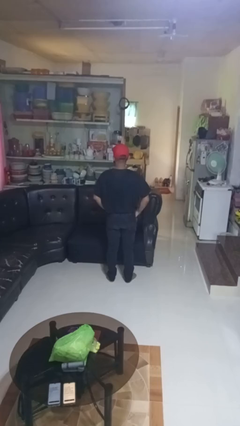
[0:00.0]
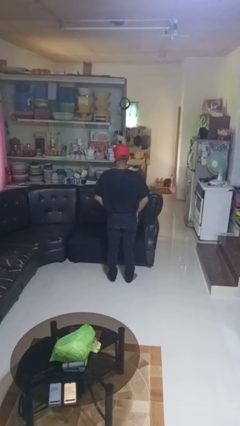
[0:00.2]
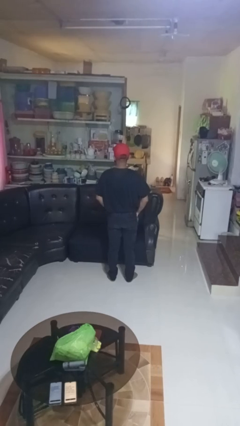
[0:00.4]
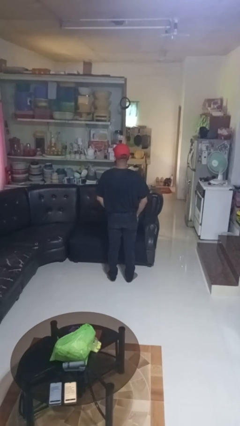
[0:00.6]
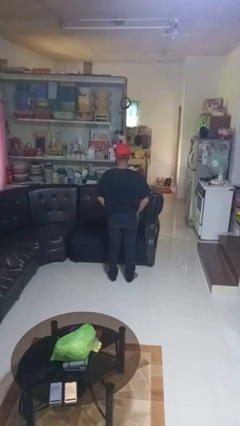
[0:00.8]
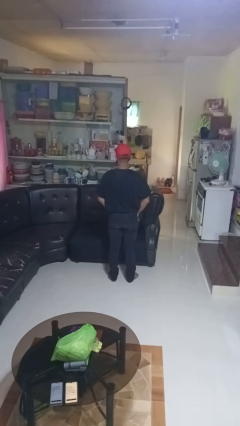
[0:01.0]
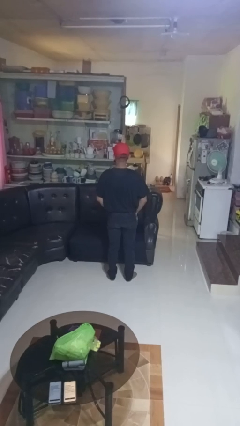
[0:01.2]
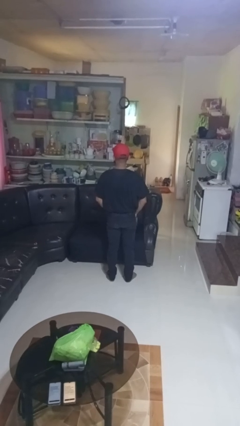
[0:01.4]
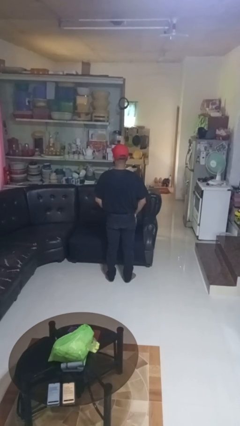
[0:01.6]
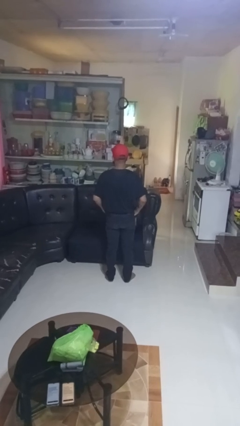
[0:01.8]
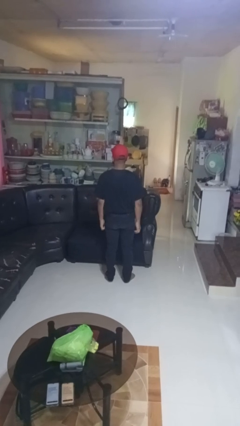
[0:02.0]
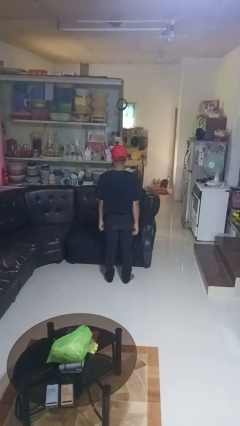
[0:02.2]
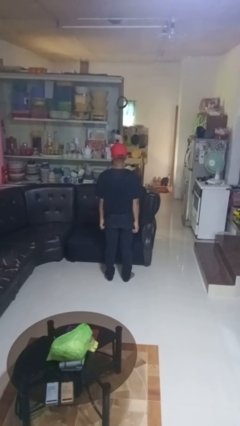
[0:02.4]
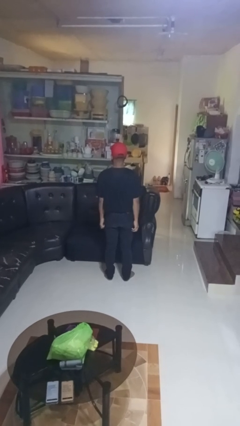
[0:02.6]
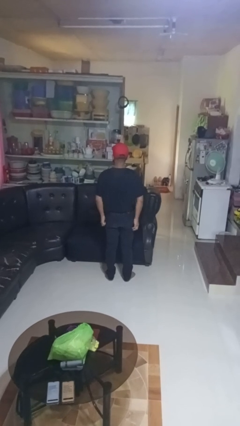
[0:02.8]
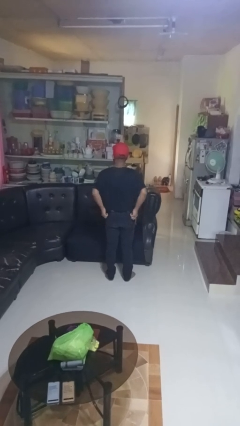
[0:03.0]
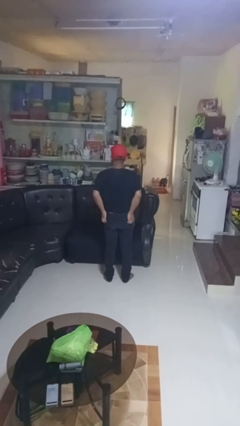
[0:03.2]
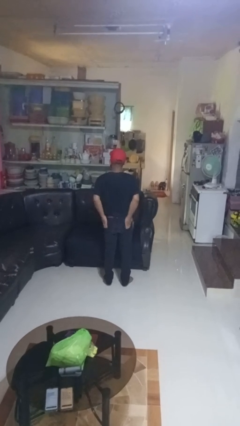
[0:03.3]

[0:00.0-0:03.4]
person puts hands in back pockets

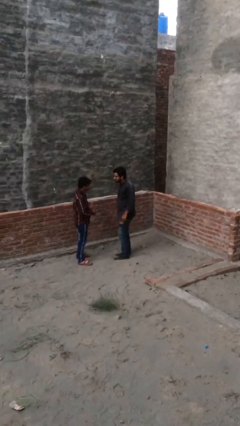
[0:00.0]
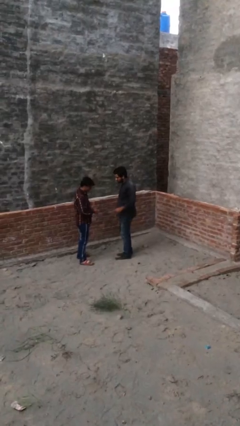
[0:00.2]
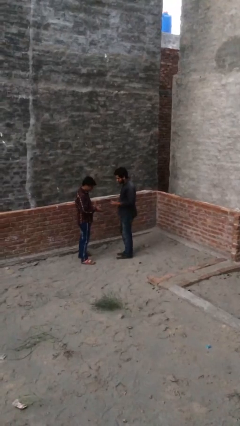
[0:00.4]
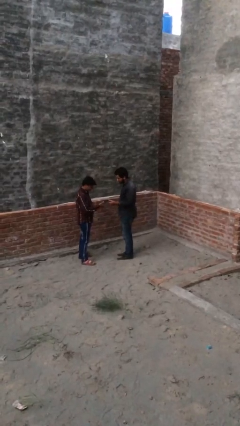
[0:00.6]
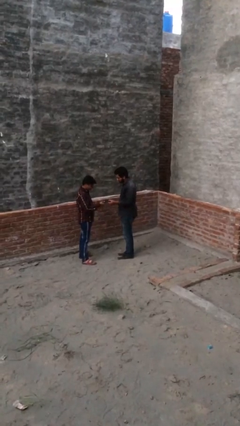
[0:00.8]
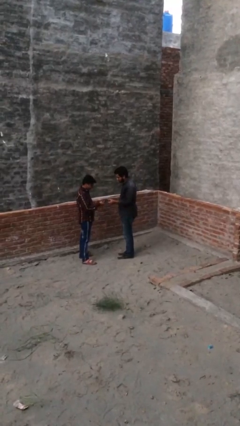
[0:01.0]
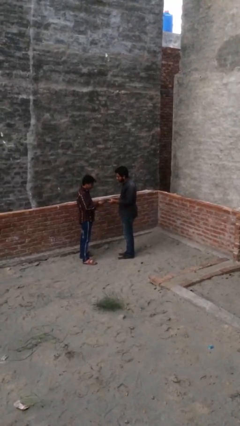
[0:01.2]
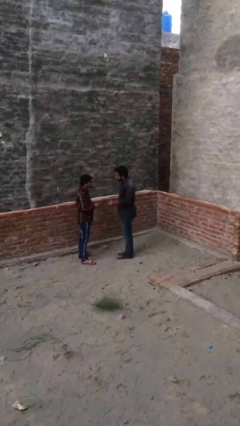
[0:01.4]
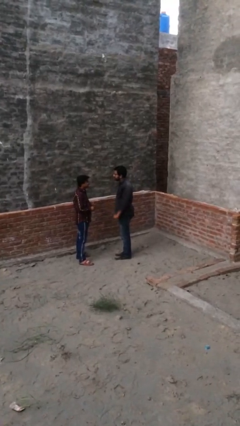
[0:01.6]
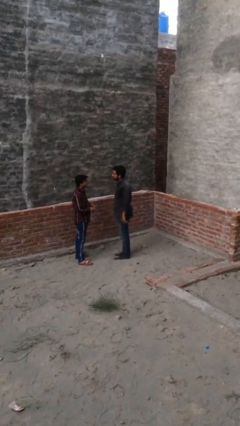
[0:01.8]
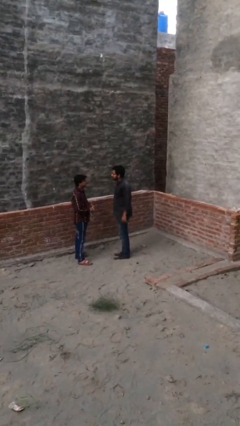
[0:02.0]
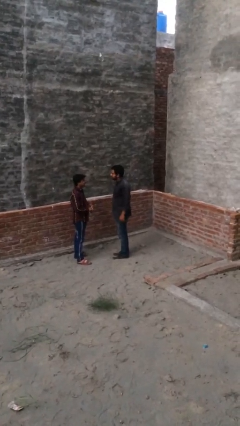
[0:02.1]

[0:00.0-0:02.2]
person transfers object to person

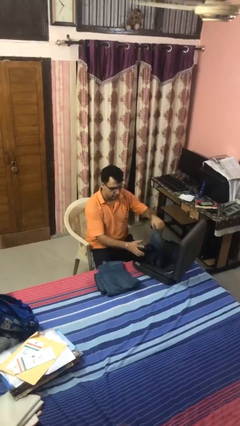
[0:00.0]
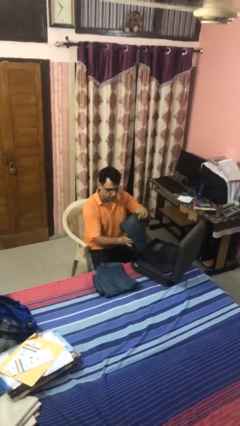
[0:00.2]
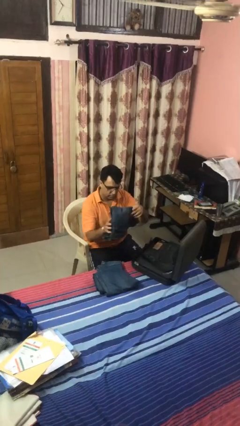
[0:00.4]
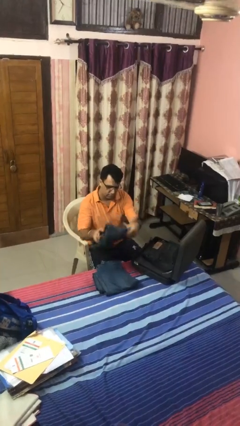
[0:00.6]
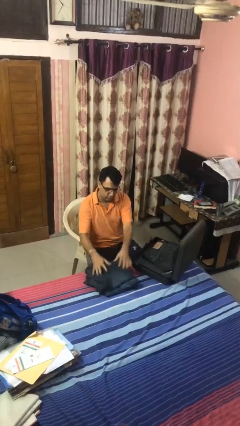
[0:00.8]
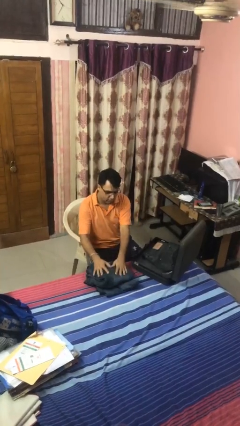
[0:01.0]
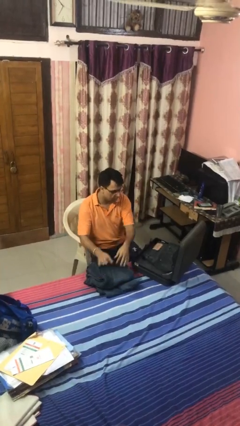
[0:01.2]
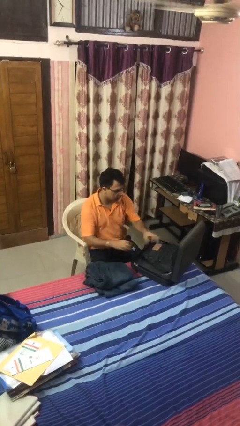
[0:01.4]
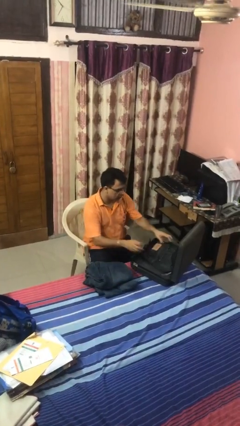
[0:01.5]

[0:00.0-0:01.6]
person unloads clothes from suitcase

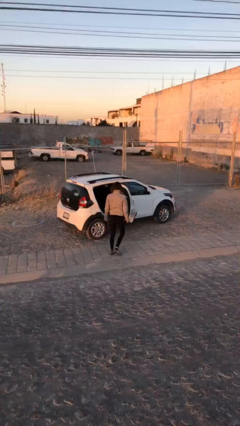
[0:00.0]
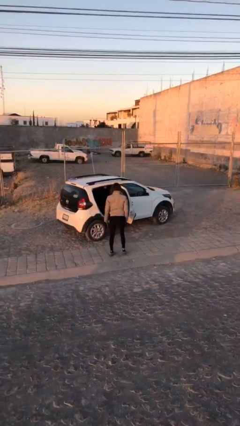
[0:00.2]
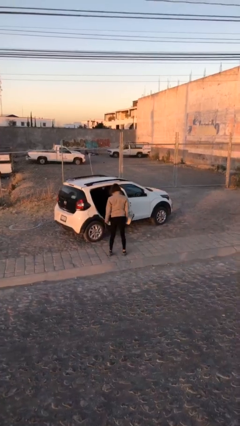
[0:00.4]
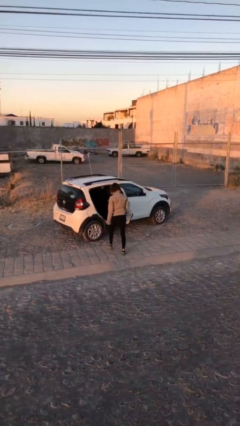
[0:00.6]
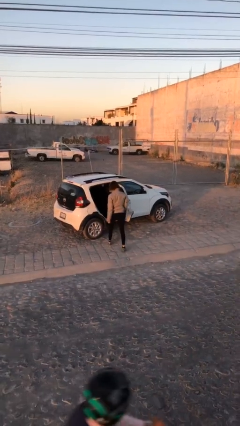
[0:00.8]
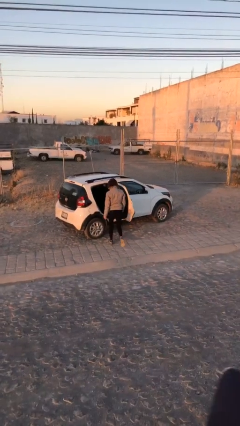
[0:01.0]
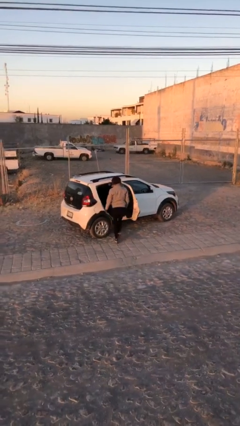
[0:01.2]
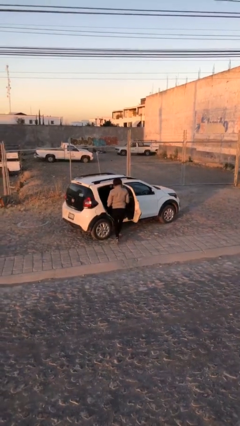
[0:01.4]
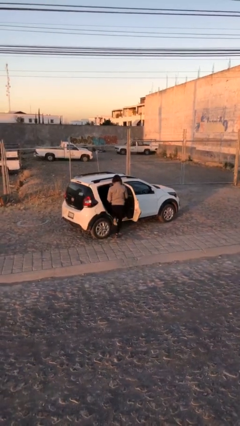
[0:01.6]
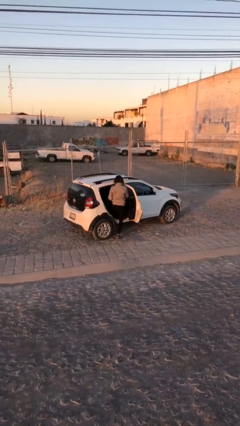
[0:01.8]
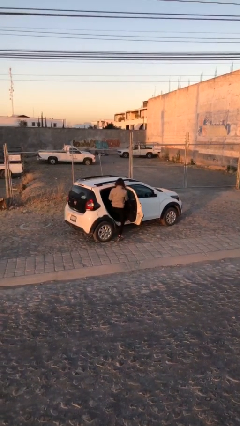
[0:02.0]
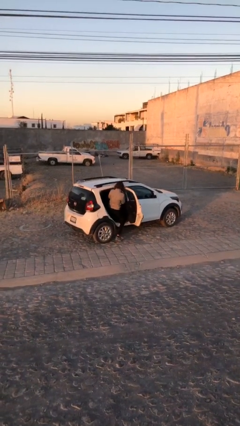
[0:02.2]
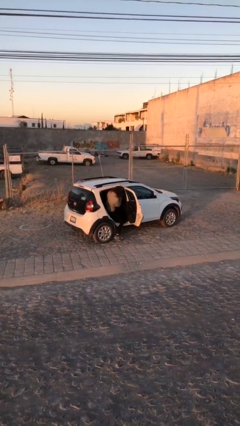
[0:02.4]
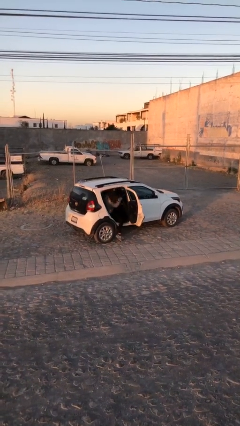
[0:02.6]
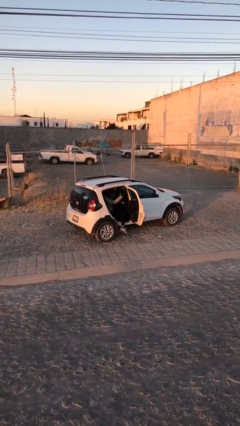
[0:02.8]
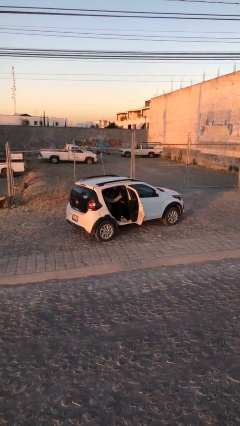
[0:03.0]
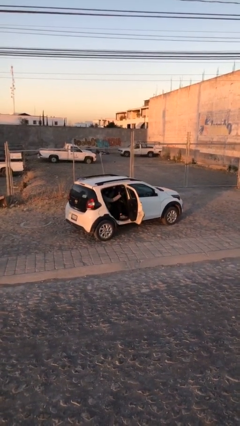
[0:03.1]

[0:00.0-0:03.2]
person enters car

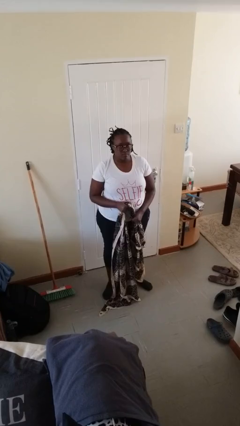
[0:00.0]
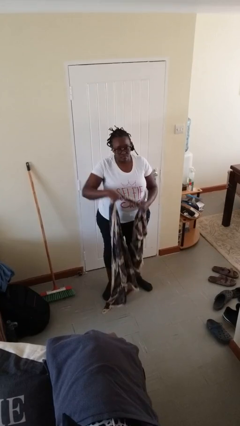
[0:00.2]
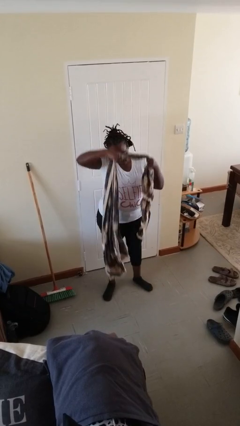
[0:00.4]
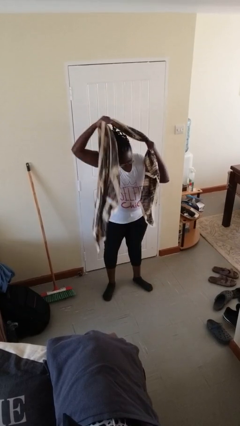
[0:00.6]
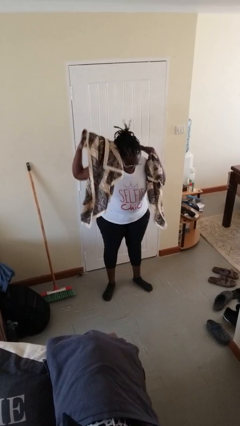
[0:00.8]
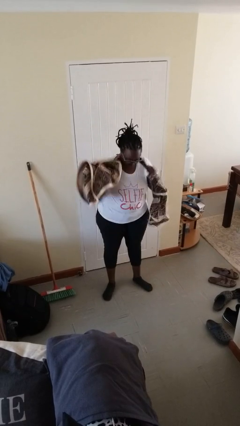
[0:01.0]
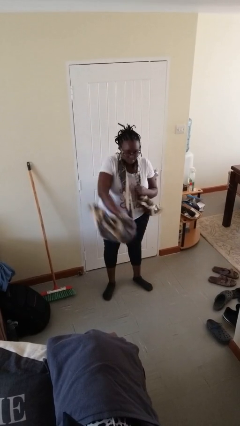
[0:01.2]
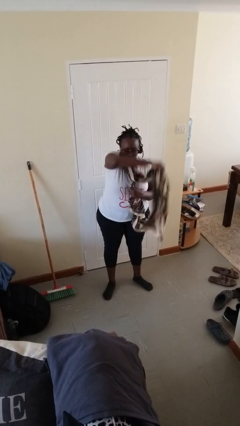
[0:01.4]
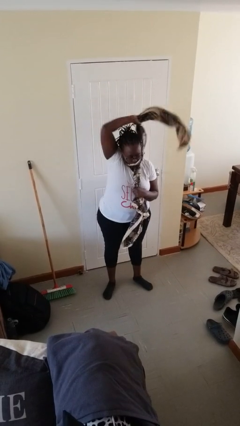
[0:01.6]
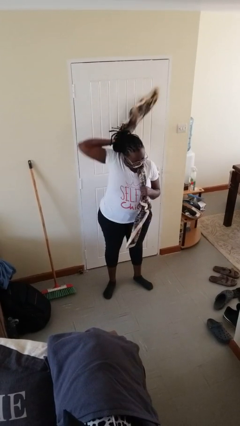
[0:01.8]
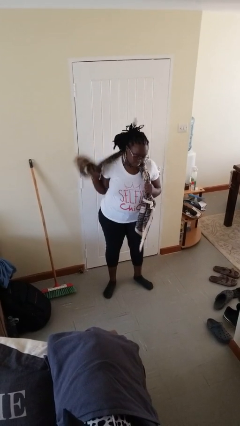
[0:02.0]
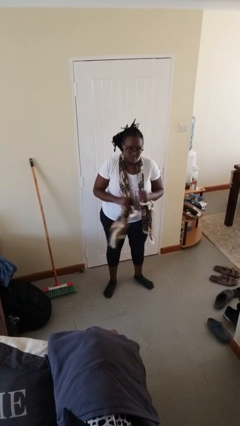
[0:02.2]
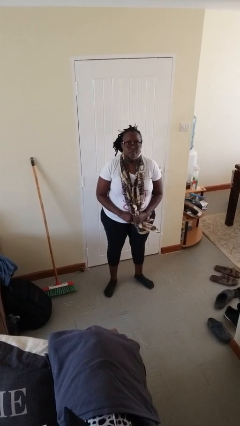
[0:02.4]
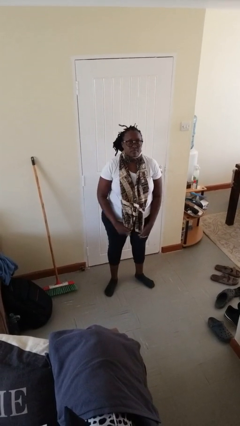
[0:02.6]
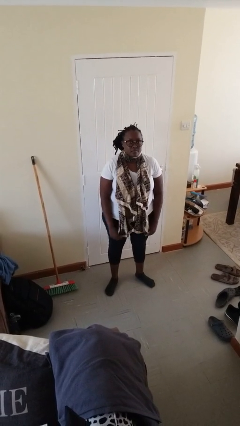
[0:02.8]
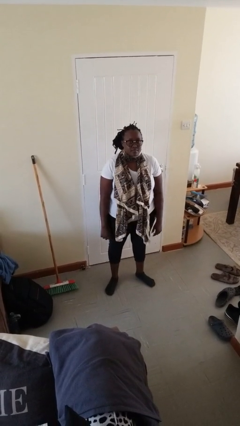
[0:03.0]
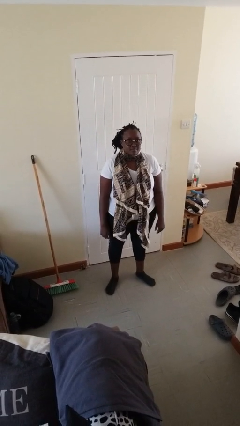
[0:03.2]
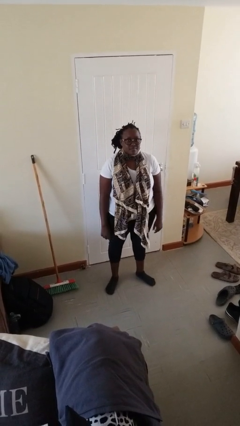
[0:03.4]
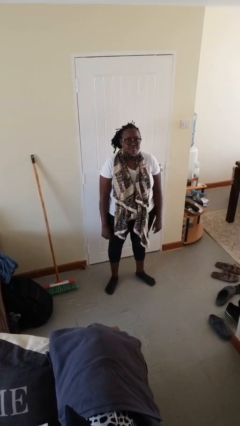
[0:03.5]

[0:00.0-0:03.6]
person puts on scarf

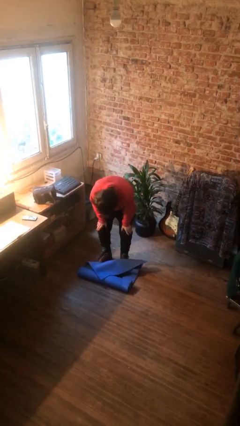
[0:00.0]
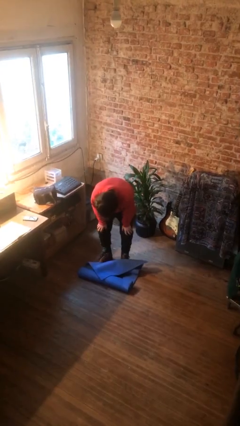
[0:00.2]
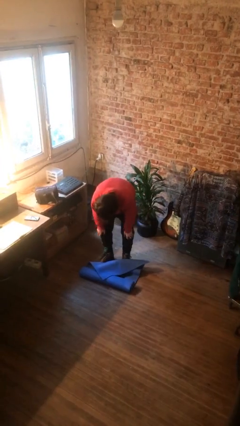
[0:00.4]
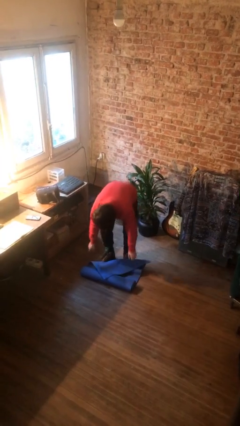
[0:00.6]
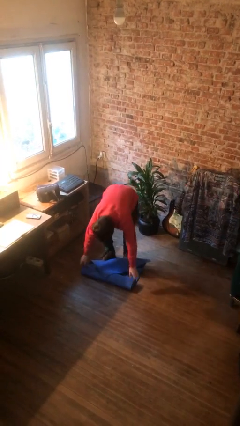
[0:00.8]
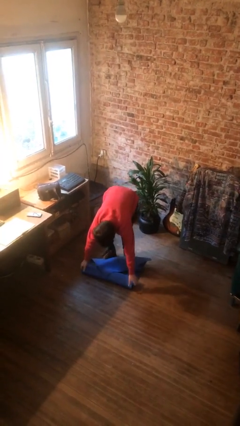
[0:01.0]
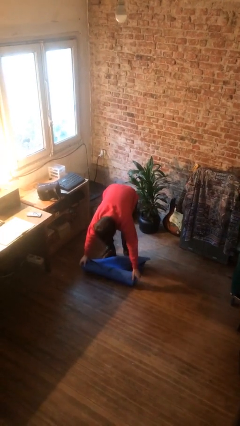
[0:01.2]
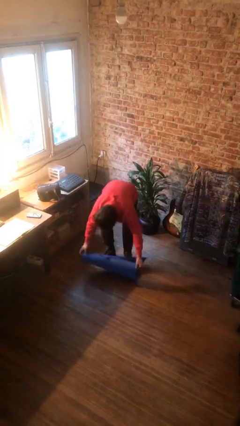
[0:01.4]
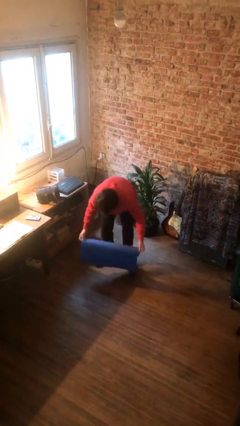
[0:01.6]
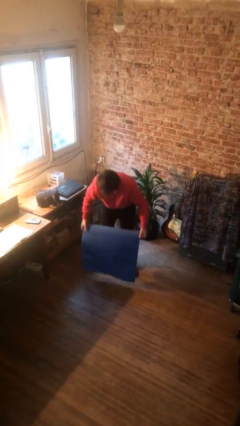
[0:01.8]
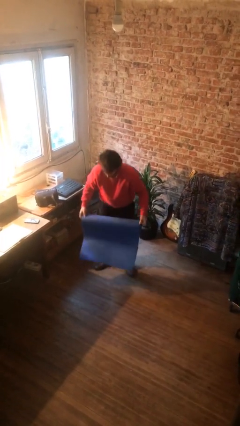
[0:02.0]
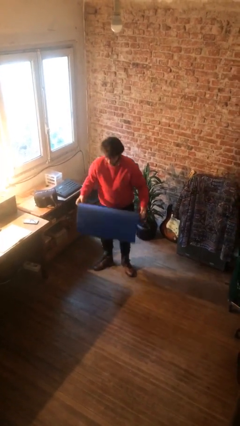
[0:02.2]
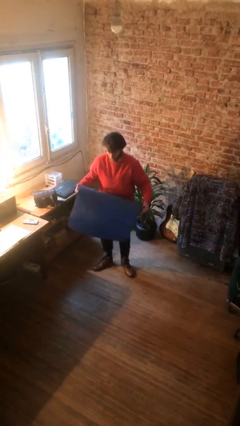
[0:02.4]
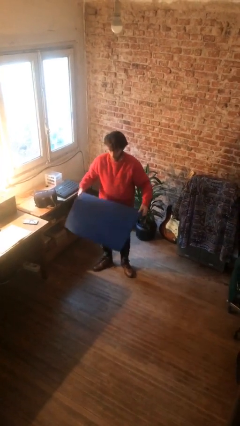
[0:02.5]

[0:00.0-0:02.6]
person picks up object from floor

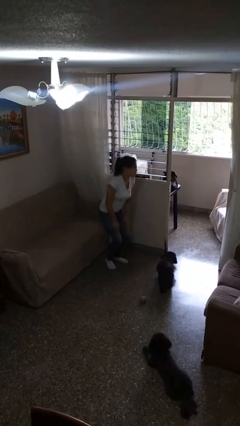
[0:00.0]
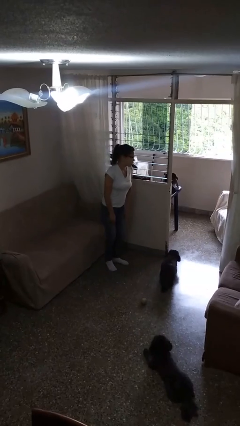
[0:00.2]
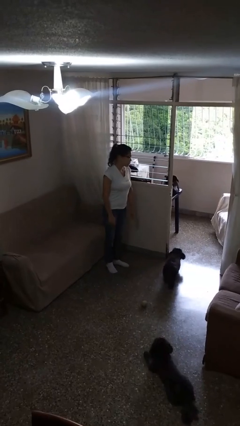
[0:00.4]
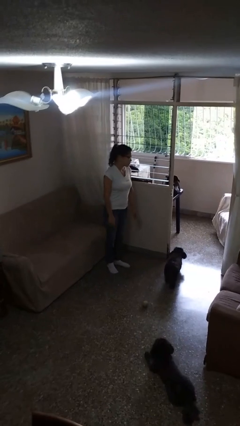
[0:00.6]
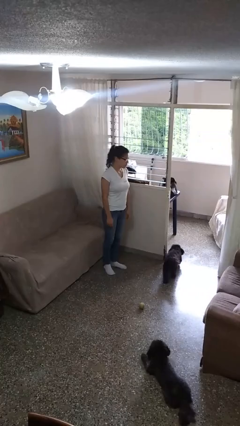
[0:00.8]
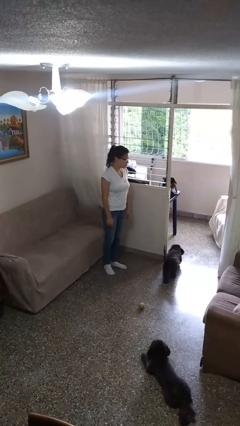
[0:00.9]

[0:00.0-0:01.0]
person stands up
